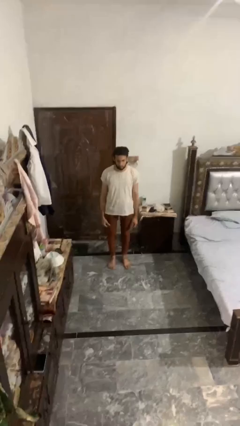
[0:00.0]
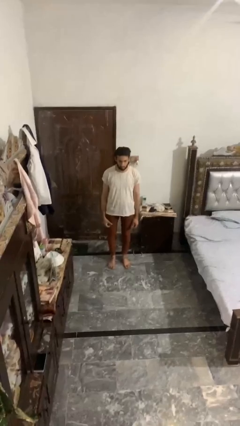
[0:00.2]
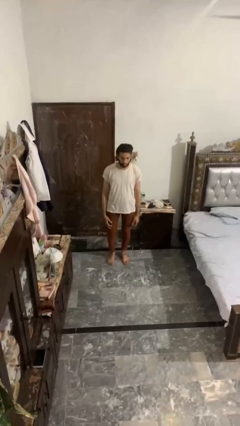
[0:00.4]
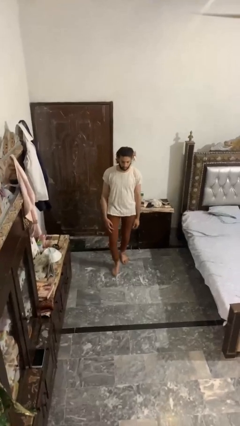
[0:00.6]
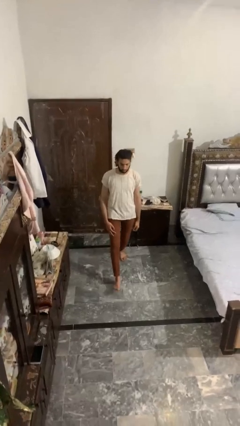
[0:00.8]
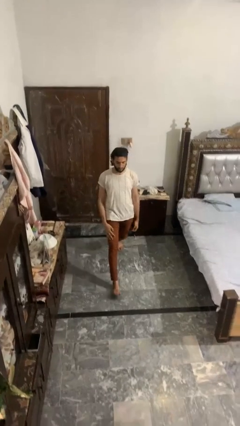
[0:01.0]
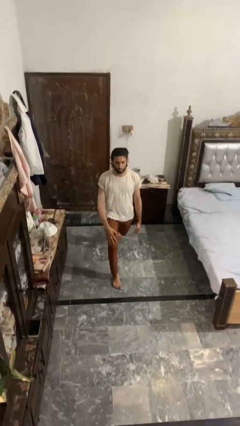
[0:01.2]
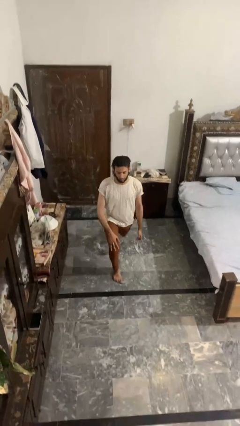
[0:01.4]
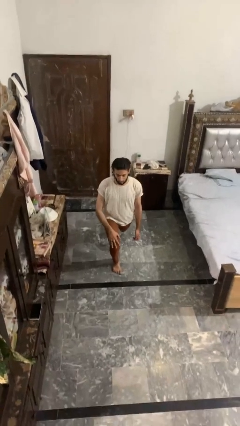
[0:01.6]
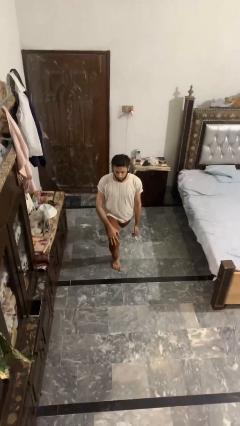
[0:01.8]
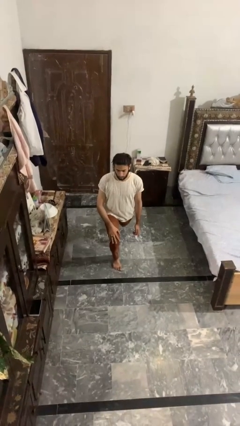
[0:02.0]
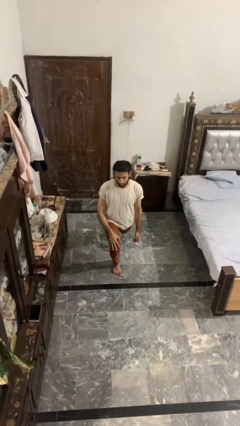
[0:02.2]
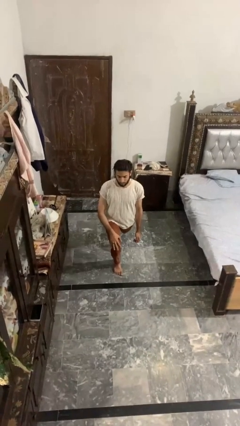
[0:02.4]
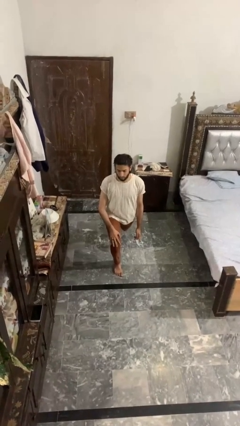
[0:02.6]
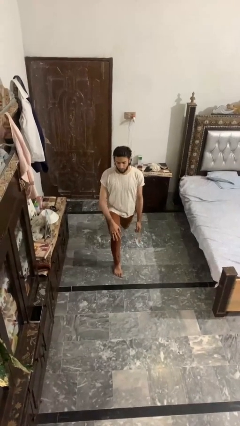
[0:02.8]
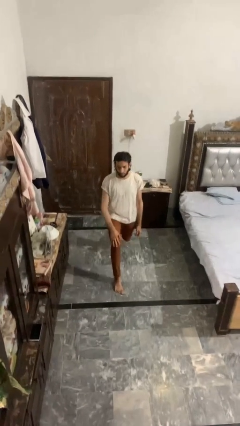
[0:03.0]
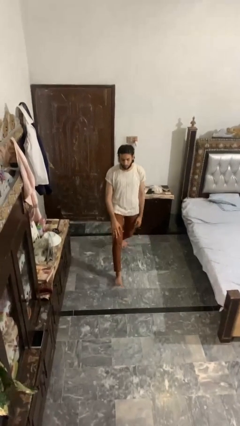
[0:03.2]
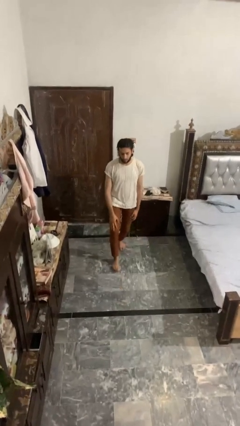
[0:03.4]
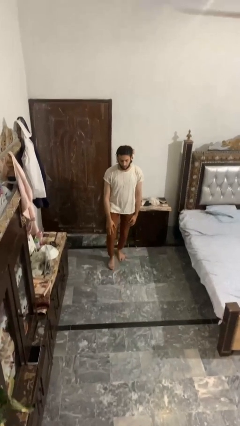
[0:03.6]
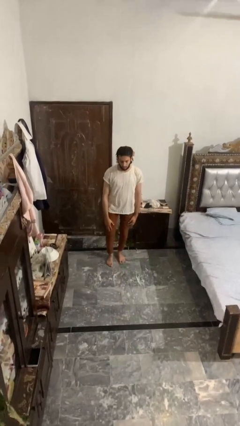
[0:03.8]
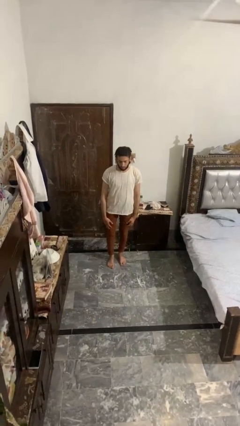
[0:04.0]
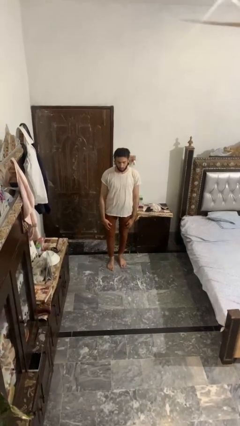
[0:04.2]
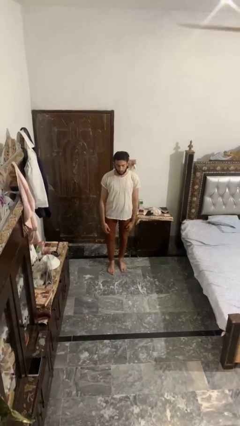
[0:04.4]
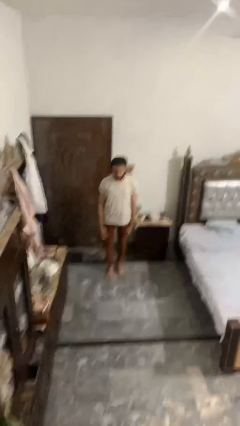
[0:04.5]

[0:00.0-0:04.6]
person exercises with lunges

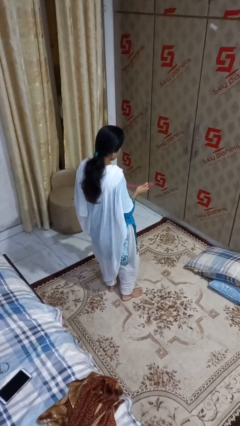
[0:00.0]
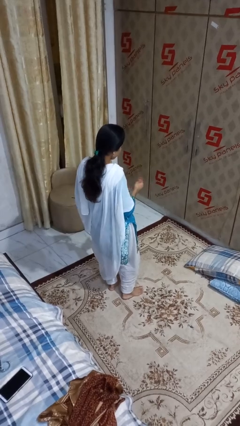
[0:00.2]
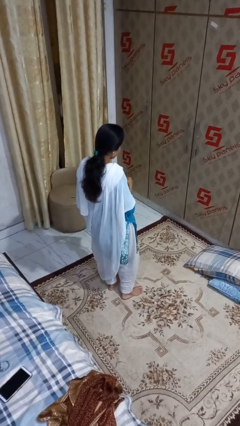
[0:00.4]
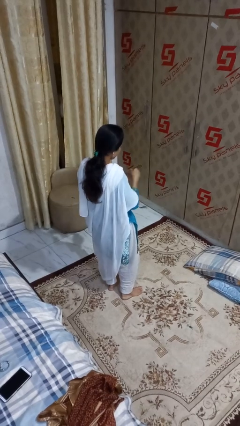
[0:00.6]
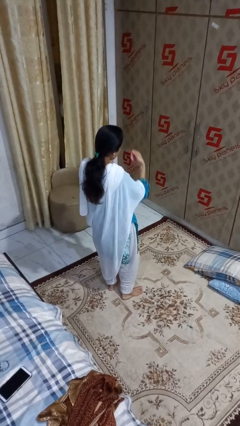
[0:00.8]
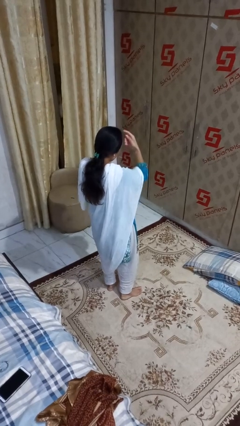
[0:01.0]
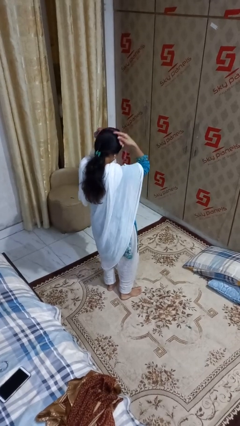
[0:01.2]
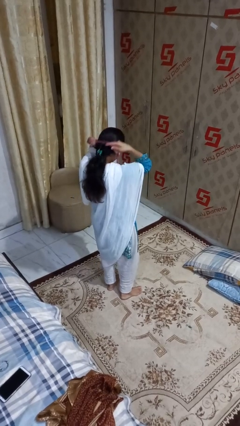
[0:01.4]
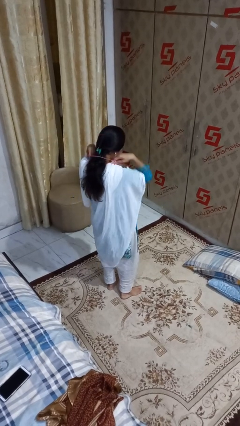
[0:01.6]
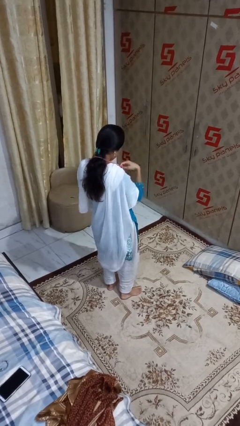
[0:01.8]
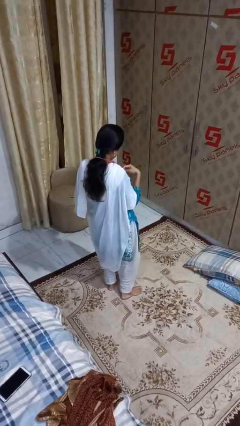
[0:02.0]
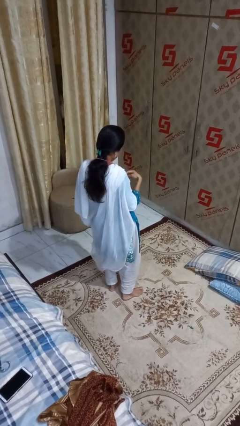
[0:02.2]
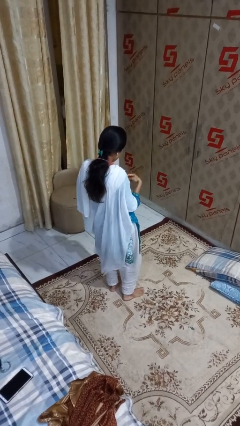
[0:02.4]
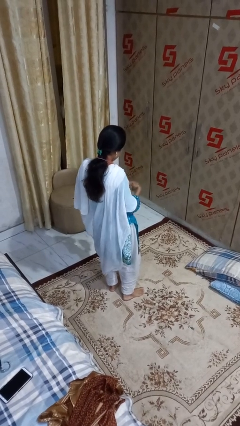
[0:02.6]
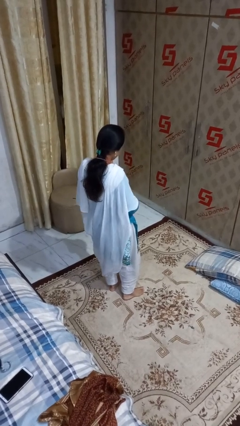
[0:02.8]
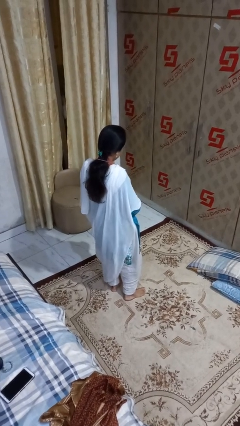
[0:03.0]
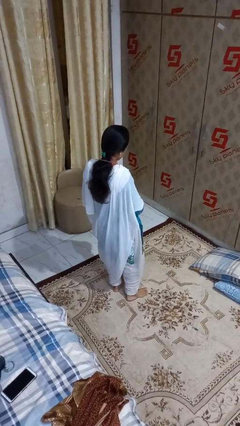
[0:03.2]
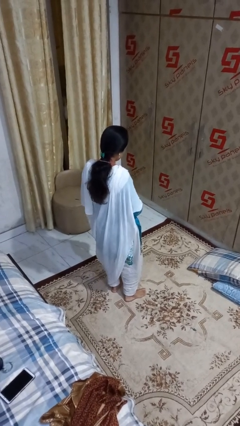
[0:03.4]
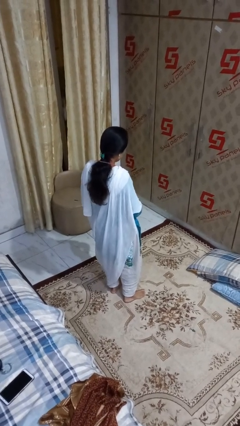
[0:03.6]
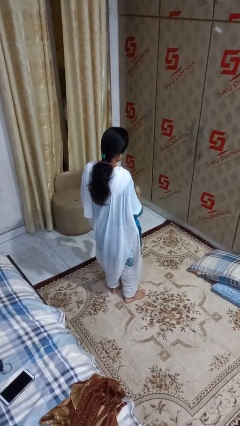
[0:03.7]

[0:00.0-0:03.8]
person puts on necklace

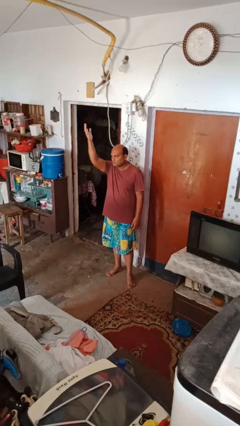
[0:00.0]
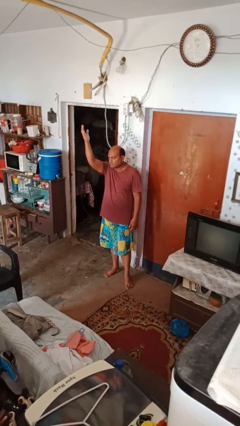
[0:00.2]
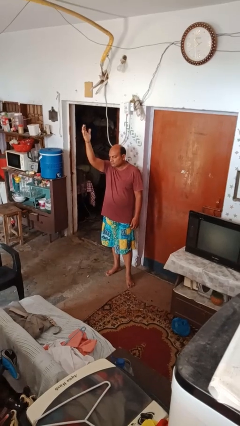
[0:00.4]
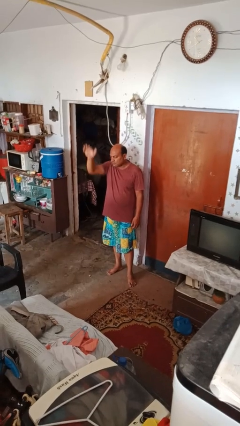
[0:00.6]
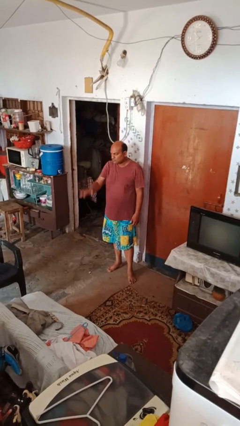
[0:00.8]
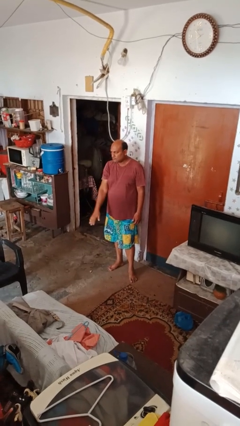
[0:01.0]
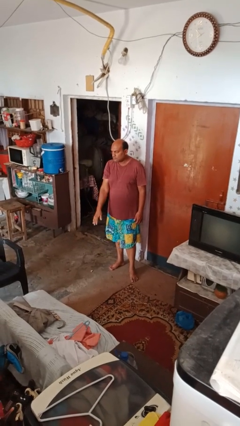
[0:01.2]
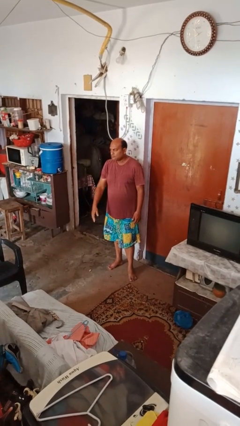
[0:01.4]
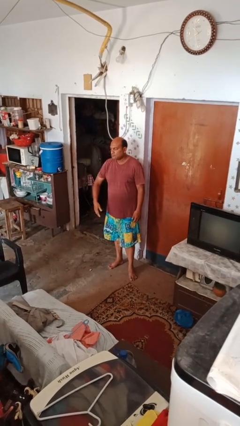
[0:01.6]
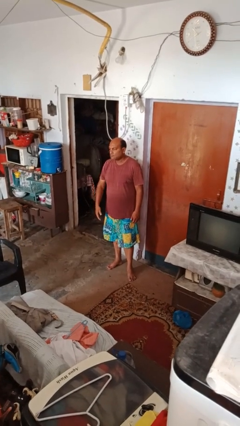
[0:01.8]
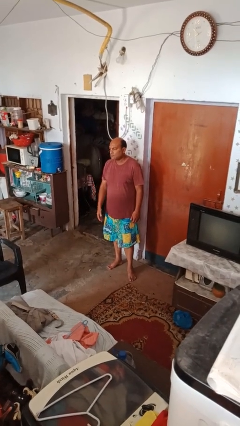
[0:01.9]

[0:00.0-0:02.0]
person gestures lower hand

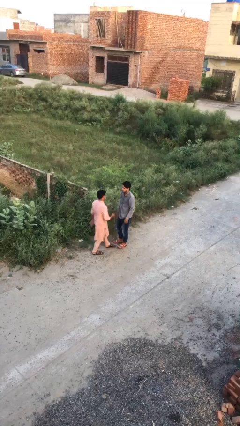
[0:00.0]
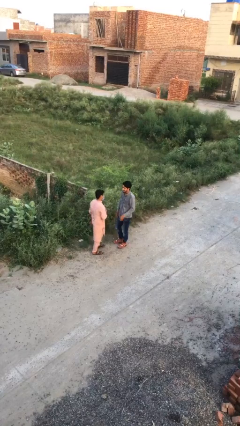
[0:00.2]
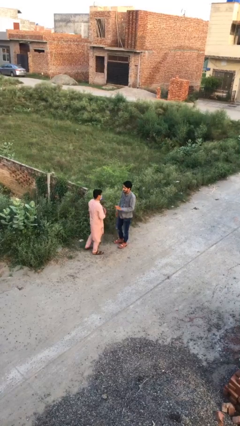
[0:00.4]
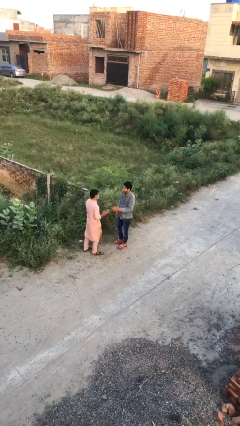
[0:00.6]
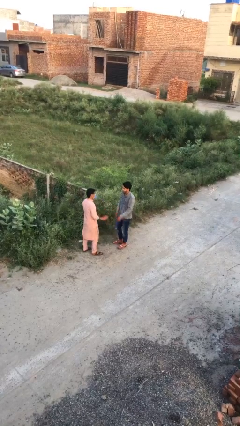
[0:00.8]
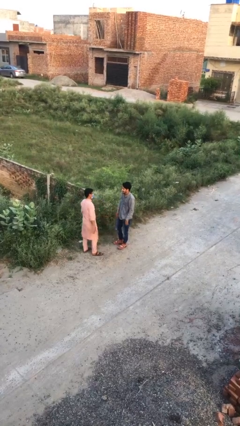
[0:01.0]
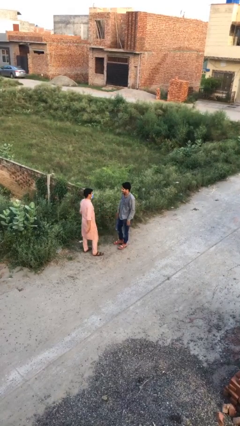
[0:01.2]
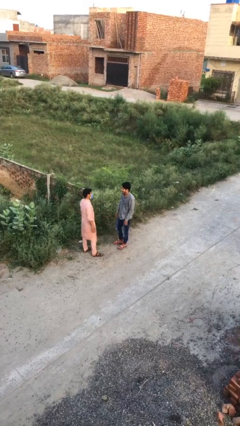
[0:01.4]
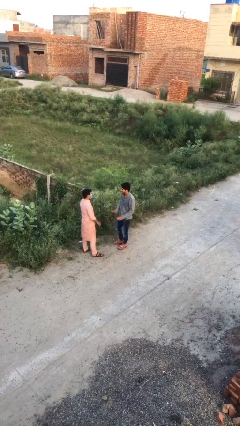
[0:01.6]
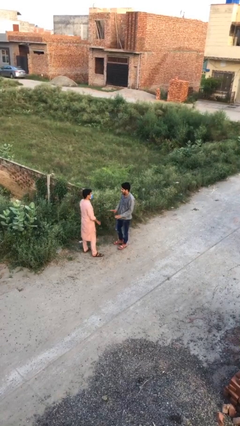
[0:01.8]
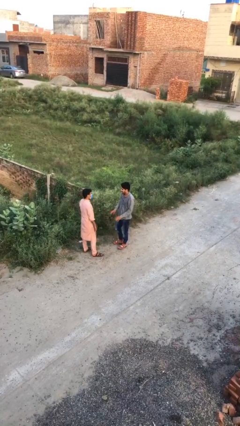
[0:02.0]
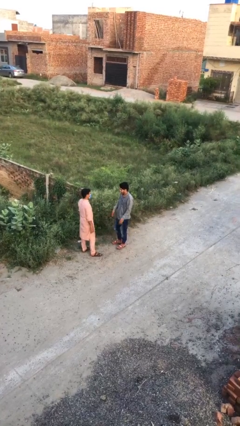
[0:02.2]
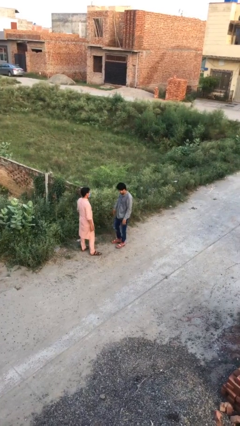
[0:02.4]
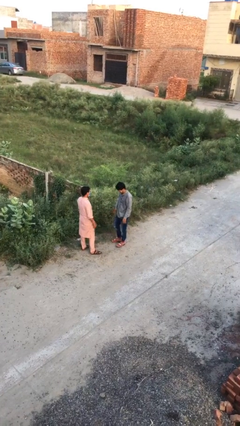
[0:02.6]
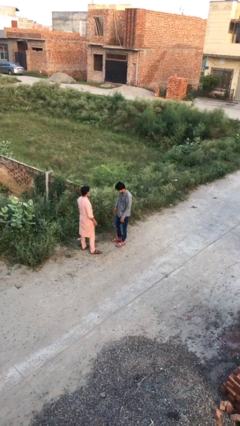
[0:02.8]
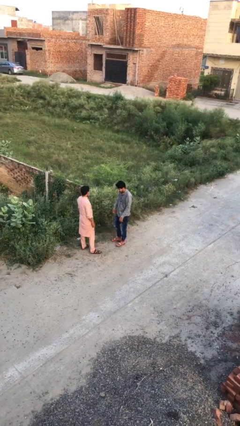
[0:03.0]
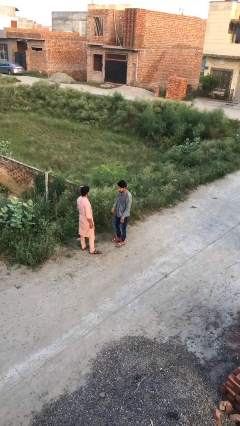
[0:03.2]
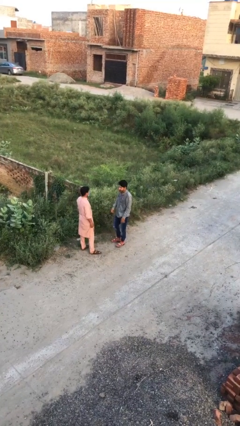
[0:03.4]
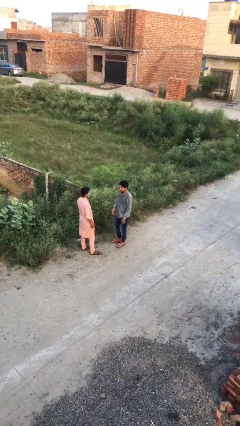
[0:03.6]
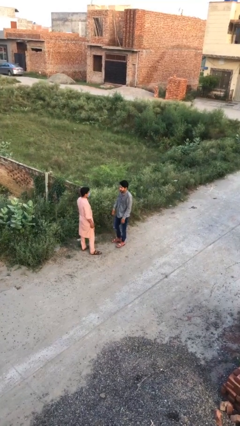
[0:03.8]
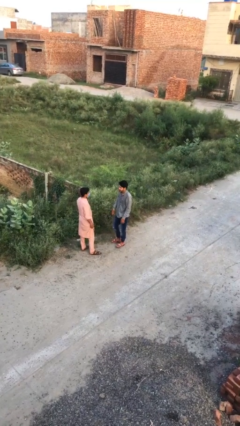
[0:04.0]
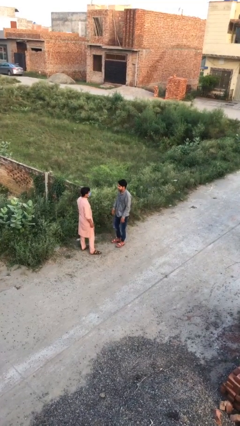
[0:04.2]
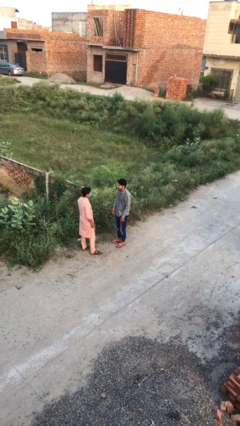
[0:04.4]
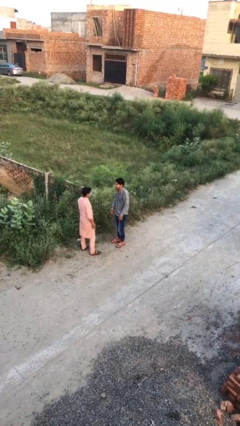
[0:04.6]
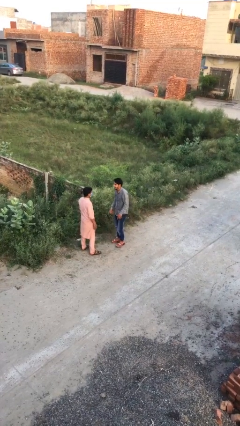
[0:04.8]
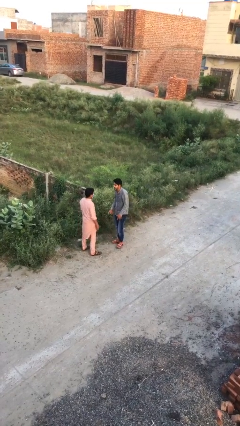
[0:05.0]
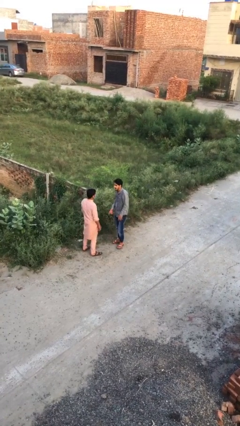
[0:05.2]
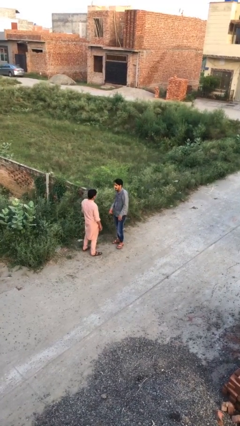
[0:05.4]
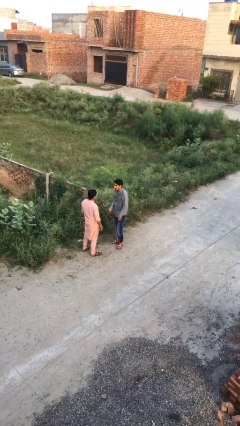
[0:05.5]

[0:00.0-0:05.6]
person talks to person

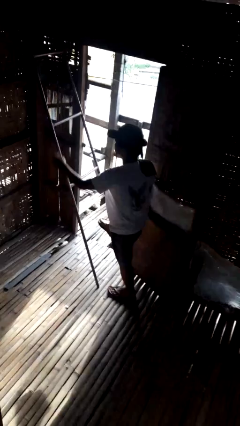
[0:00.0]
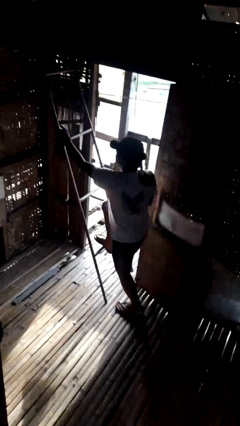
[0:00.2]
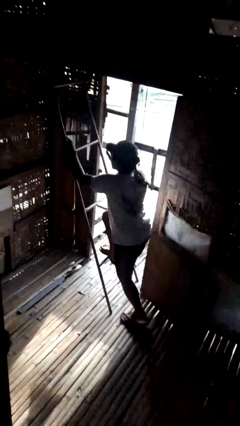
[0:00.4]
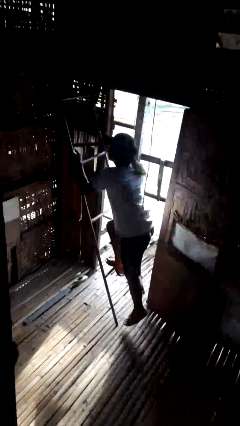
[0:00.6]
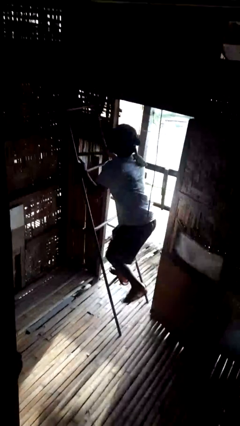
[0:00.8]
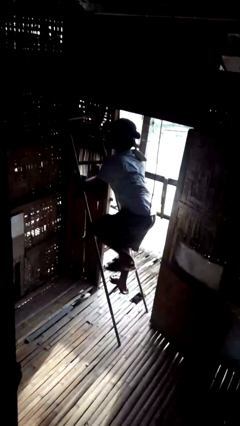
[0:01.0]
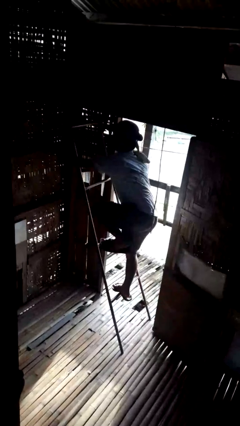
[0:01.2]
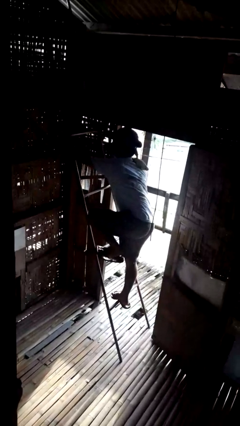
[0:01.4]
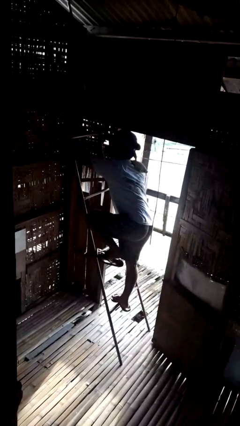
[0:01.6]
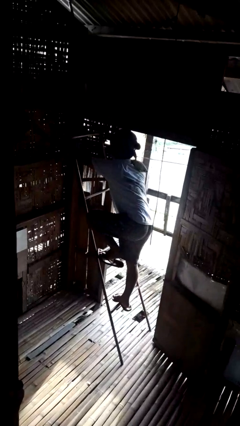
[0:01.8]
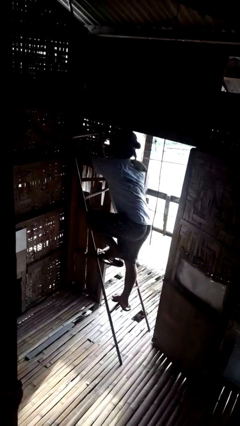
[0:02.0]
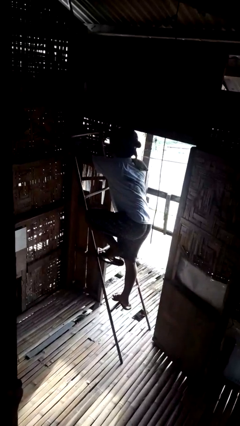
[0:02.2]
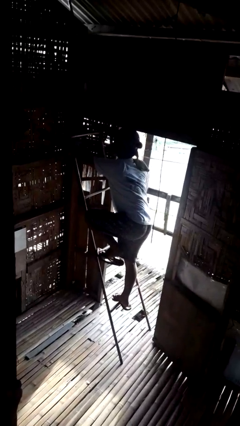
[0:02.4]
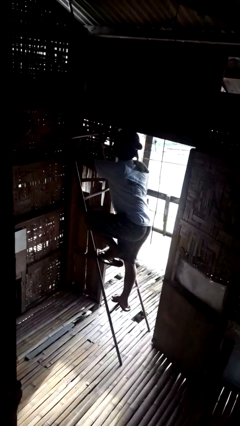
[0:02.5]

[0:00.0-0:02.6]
person climbs up ladder
